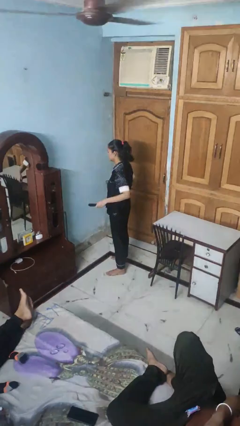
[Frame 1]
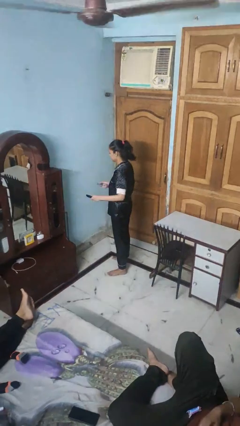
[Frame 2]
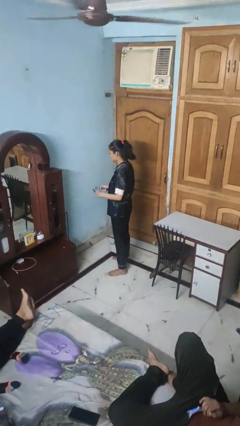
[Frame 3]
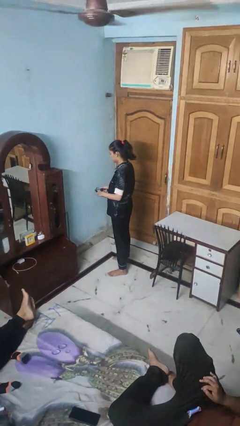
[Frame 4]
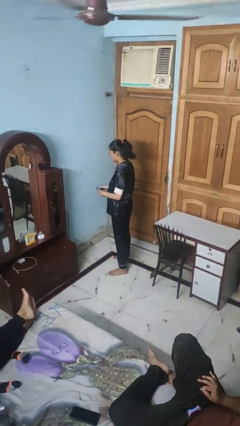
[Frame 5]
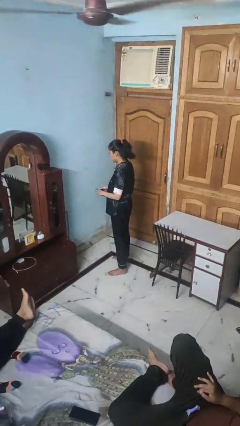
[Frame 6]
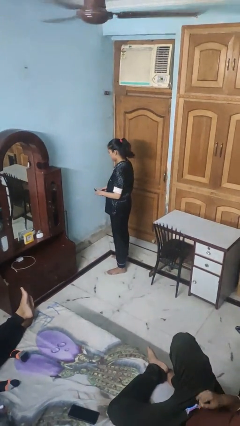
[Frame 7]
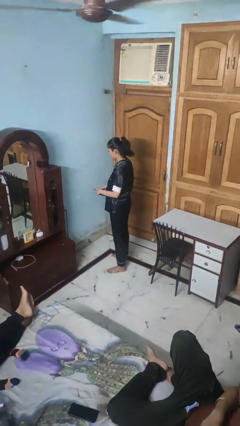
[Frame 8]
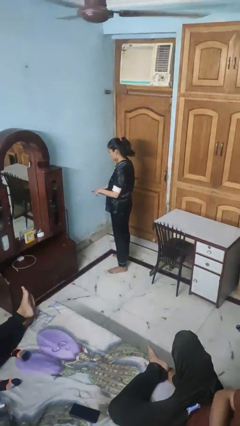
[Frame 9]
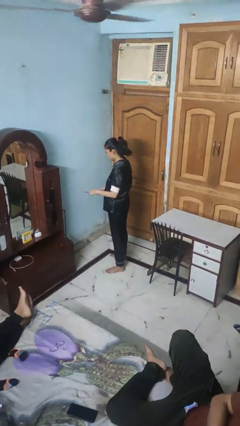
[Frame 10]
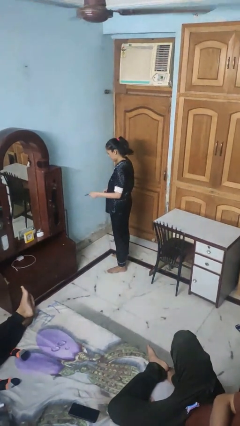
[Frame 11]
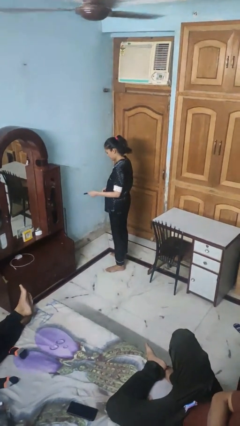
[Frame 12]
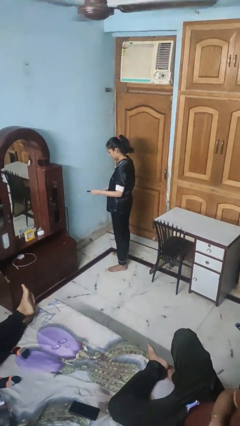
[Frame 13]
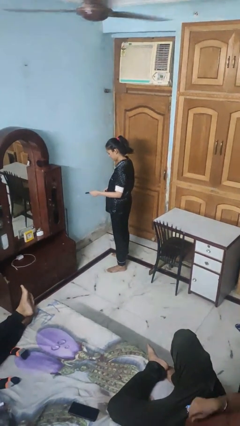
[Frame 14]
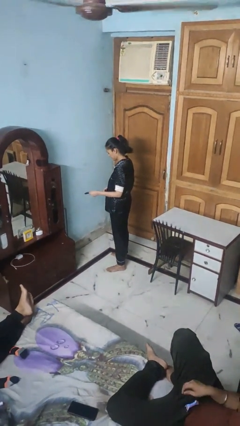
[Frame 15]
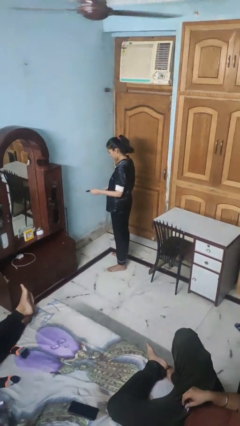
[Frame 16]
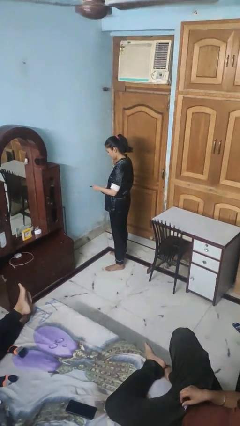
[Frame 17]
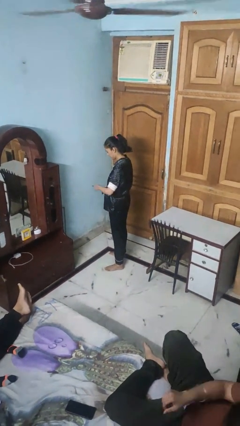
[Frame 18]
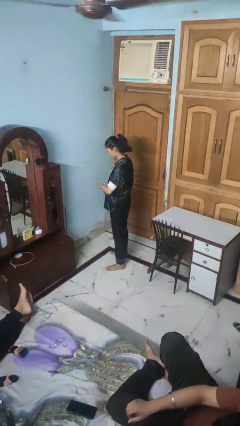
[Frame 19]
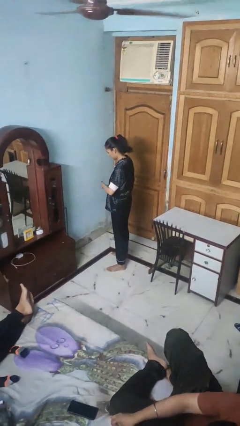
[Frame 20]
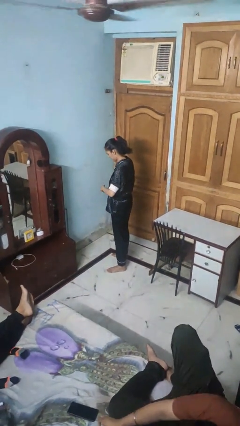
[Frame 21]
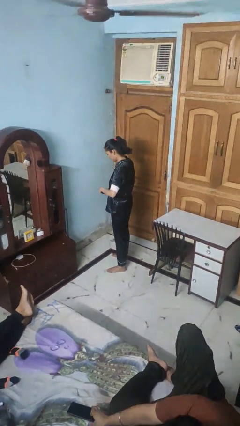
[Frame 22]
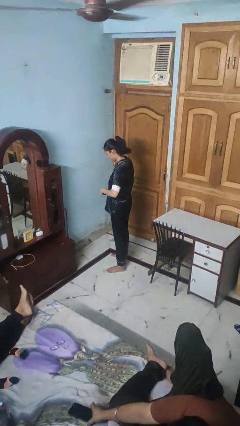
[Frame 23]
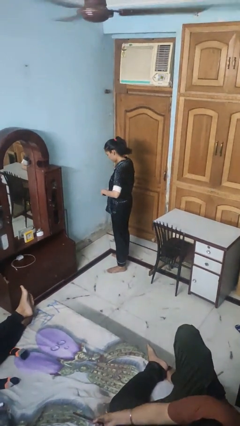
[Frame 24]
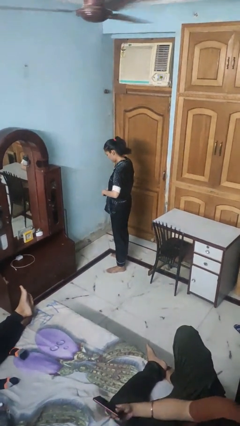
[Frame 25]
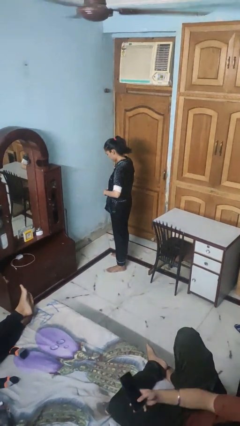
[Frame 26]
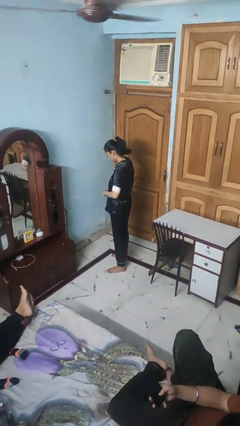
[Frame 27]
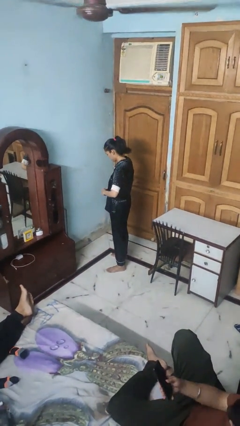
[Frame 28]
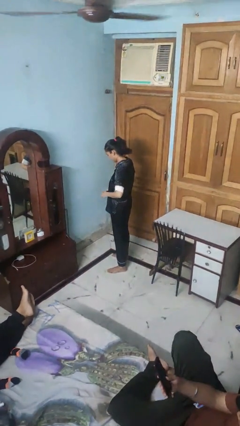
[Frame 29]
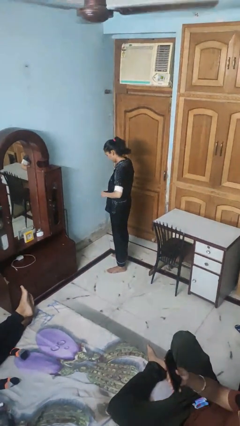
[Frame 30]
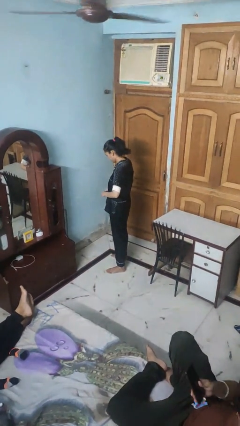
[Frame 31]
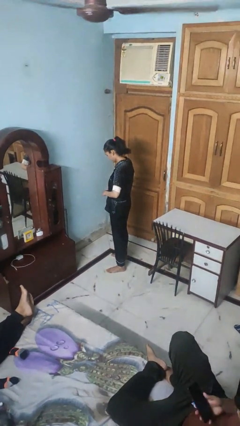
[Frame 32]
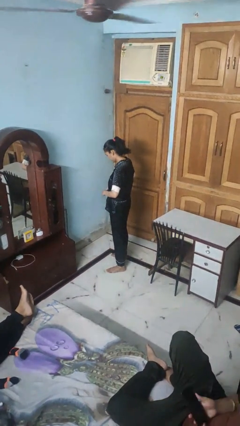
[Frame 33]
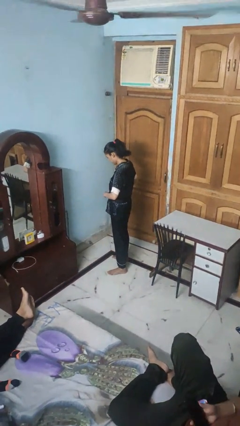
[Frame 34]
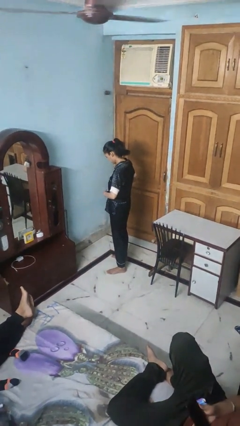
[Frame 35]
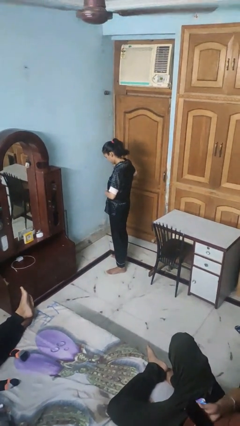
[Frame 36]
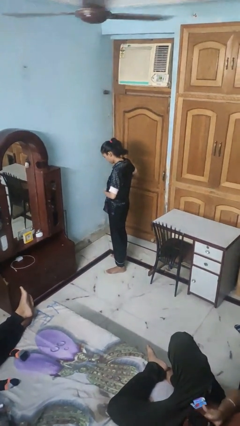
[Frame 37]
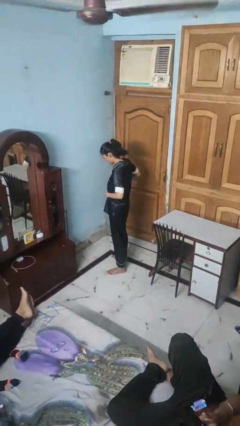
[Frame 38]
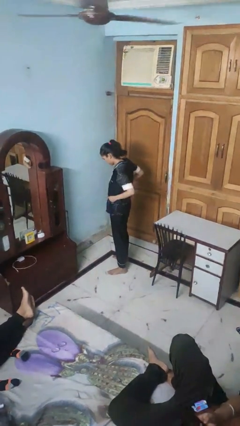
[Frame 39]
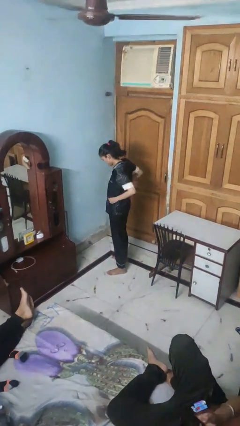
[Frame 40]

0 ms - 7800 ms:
person puts on belt

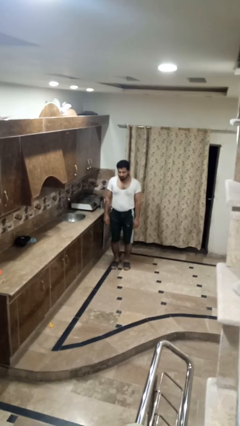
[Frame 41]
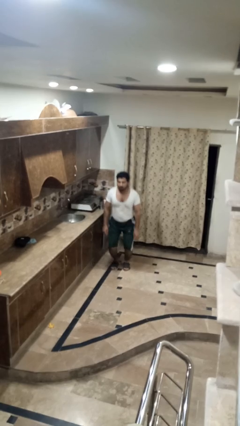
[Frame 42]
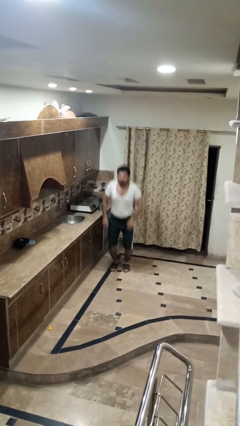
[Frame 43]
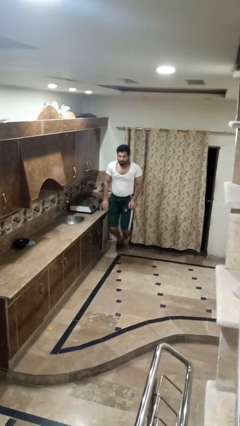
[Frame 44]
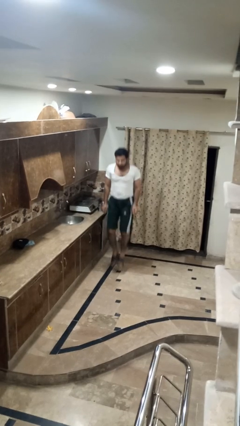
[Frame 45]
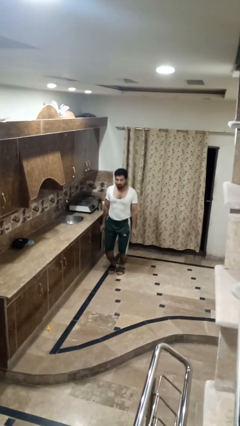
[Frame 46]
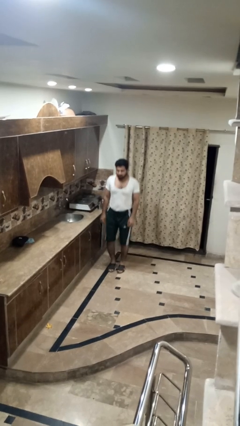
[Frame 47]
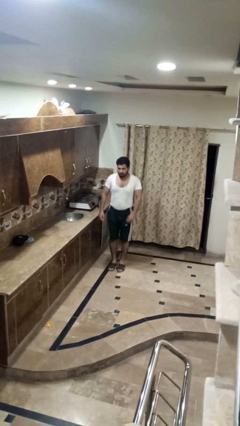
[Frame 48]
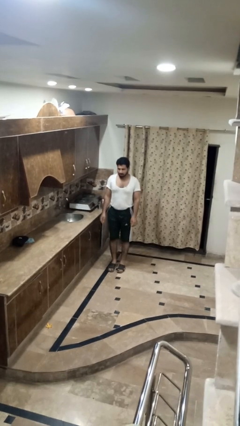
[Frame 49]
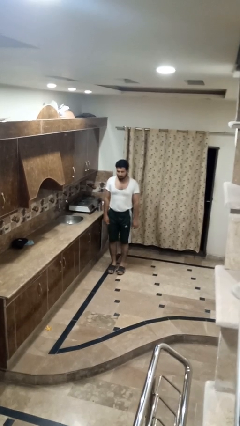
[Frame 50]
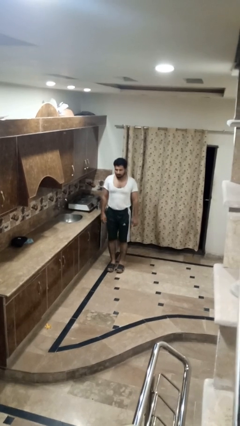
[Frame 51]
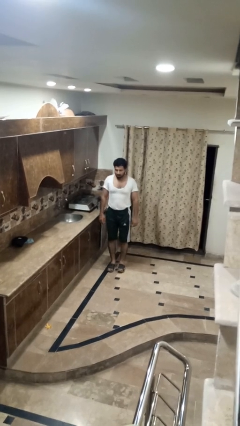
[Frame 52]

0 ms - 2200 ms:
person jumps

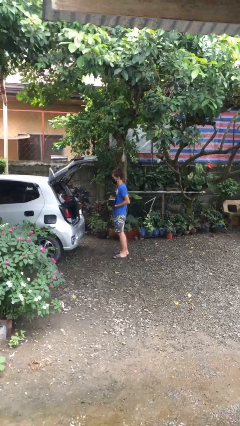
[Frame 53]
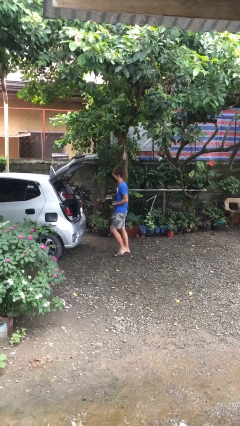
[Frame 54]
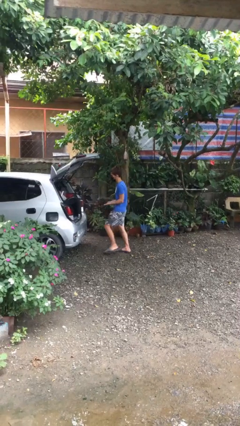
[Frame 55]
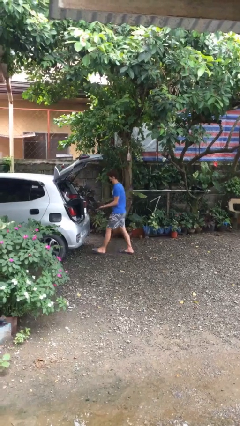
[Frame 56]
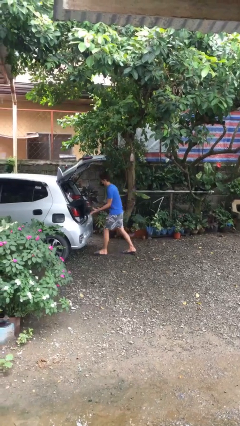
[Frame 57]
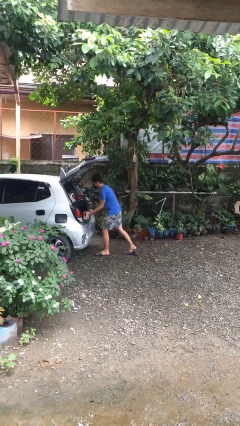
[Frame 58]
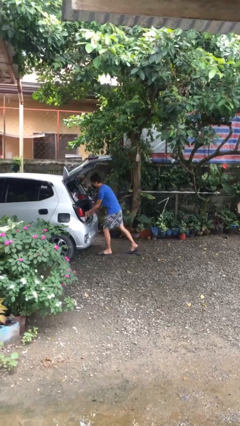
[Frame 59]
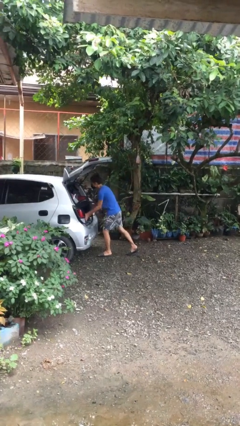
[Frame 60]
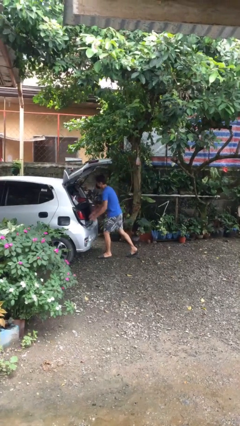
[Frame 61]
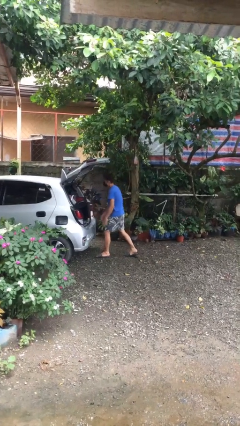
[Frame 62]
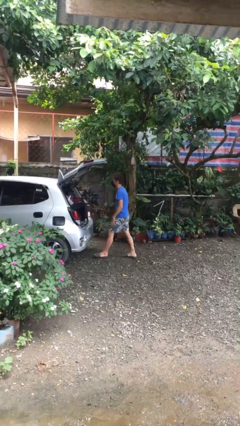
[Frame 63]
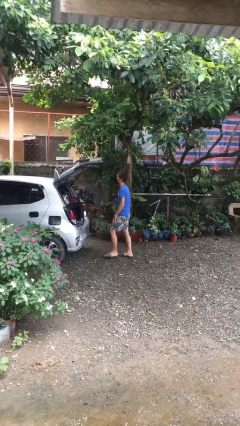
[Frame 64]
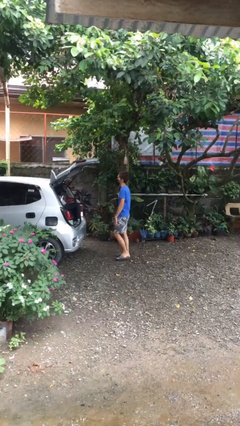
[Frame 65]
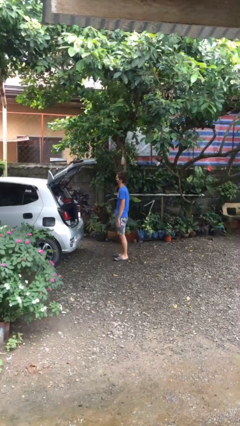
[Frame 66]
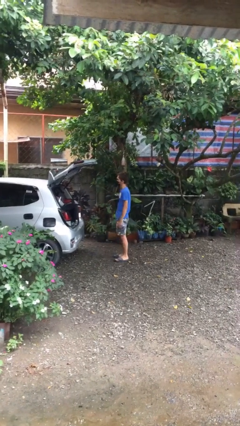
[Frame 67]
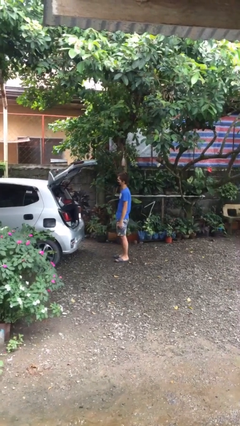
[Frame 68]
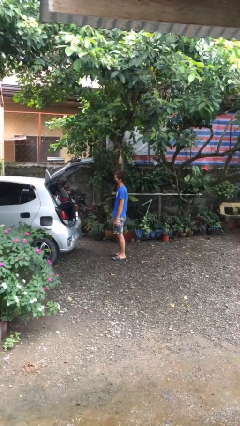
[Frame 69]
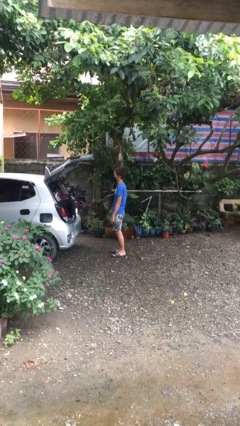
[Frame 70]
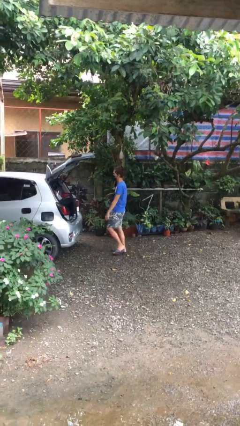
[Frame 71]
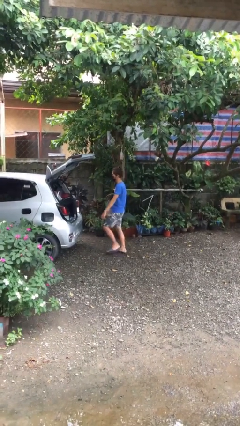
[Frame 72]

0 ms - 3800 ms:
person loads car

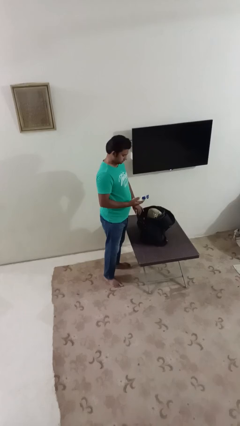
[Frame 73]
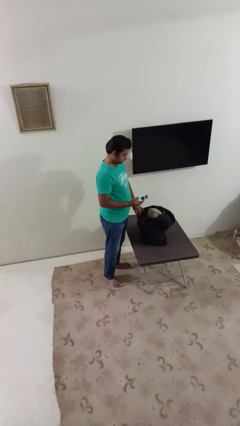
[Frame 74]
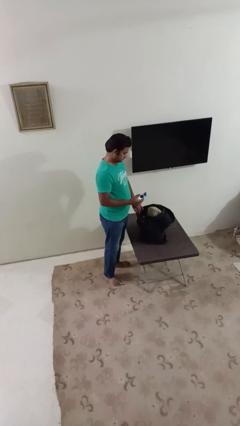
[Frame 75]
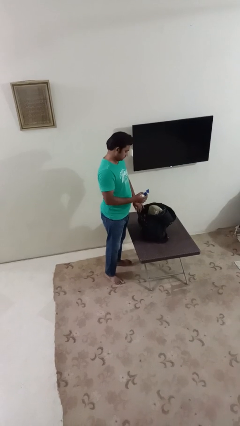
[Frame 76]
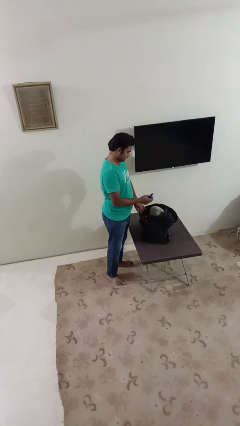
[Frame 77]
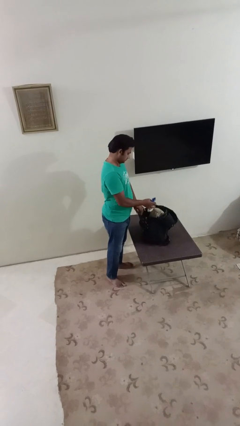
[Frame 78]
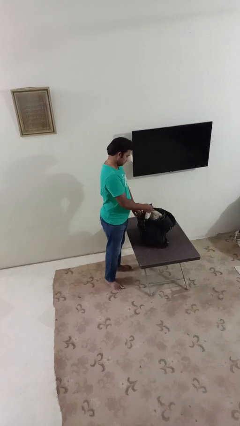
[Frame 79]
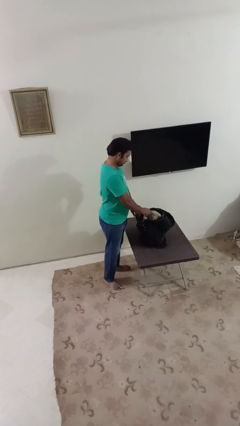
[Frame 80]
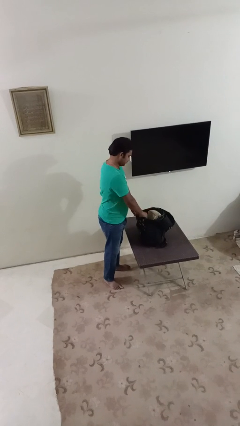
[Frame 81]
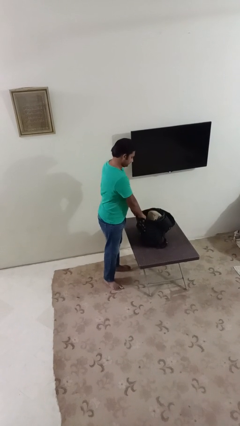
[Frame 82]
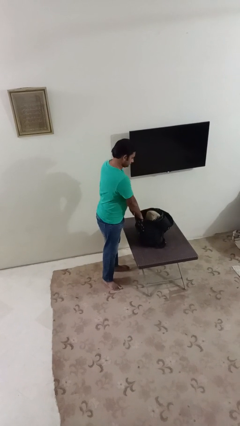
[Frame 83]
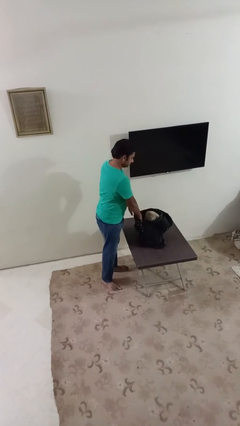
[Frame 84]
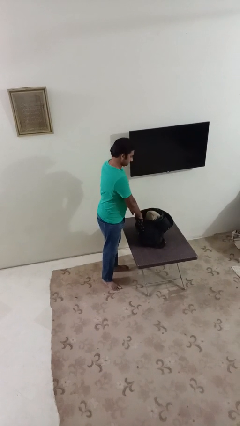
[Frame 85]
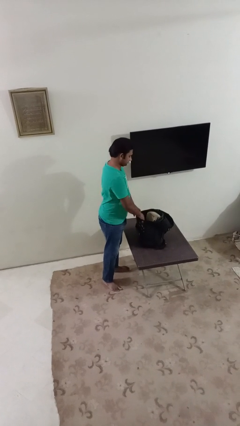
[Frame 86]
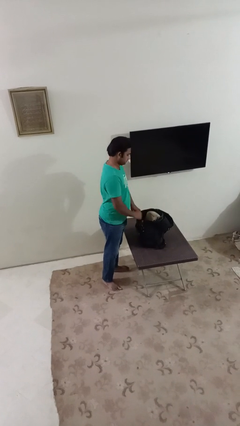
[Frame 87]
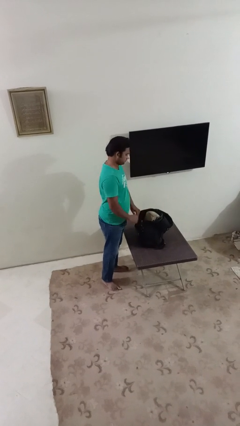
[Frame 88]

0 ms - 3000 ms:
person puts object into backpack

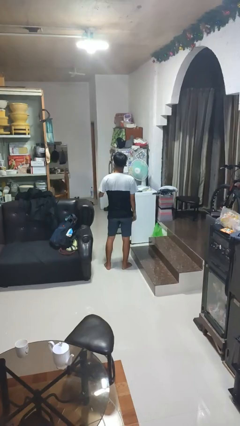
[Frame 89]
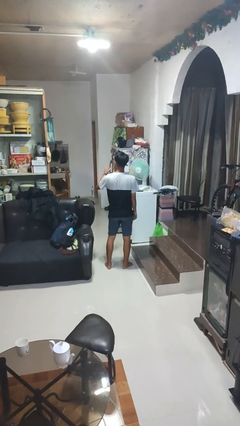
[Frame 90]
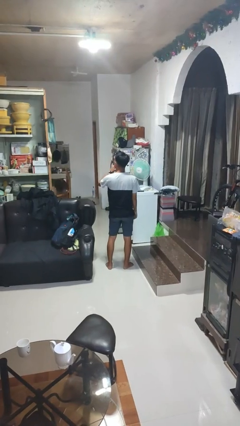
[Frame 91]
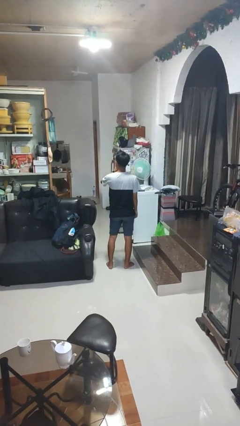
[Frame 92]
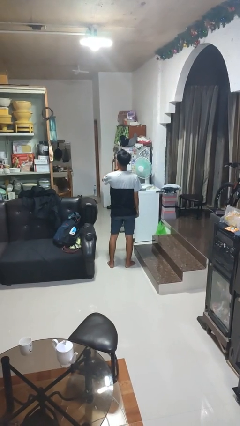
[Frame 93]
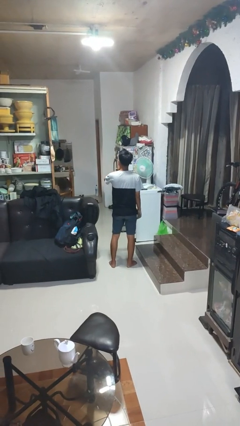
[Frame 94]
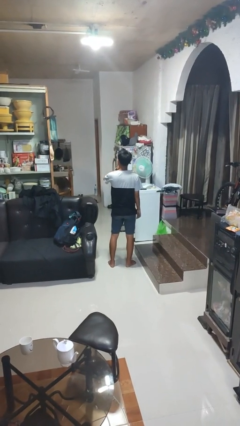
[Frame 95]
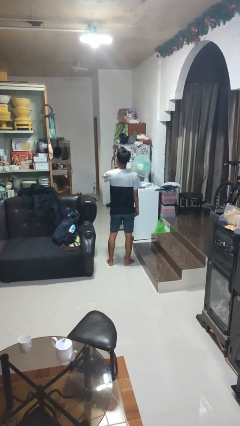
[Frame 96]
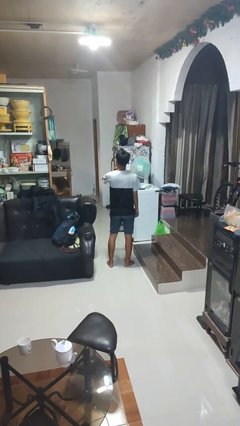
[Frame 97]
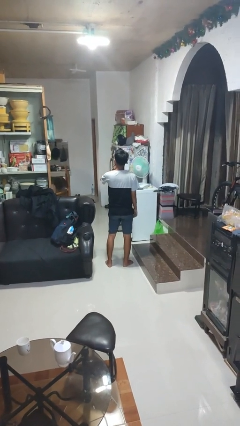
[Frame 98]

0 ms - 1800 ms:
person gestures be quiet
